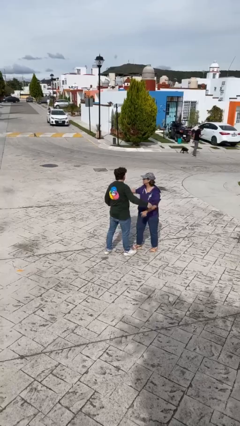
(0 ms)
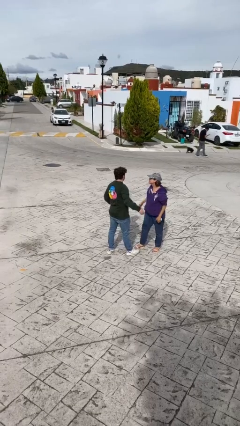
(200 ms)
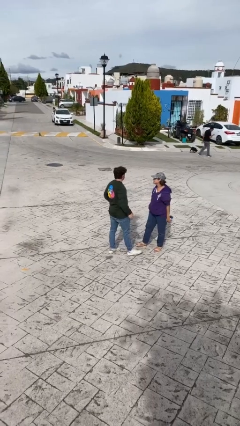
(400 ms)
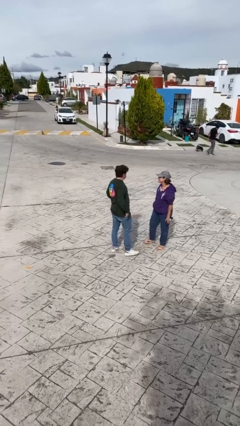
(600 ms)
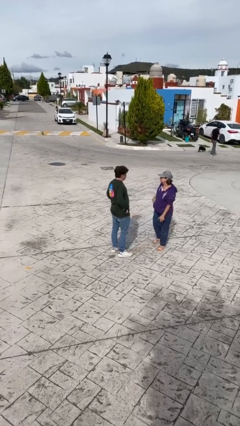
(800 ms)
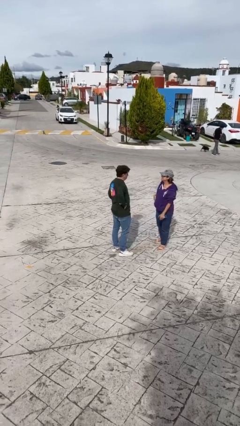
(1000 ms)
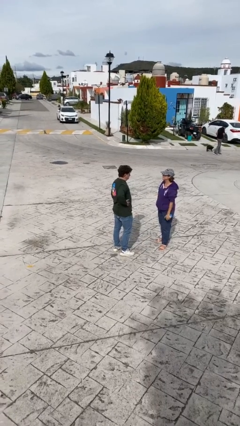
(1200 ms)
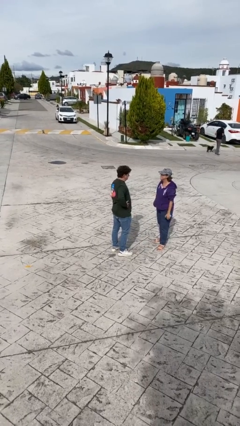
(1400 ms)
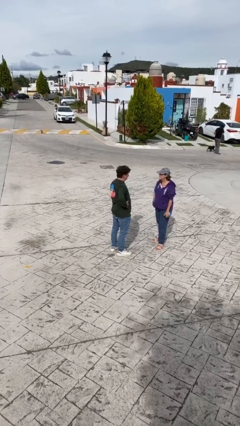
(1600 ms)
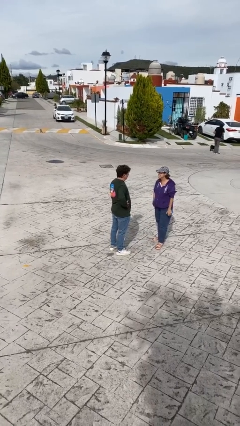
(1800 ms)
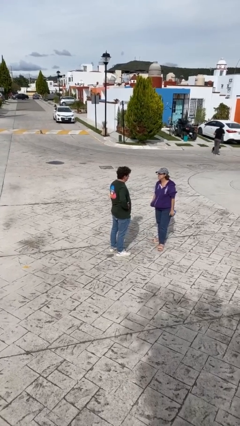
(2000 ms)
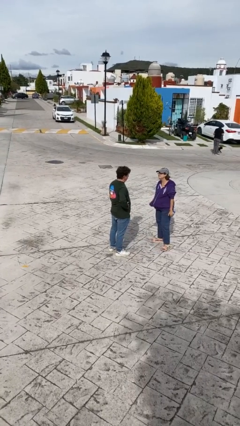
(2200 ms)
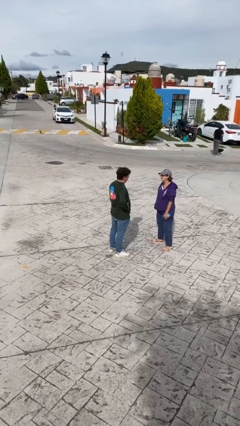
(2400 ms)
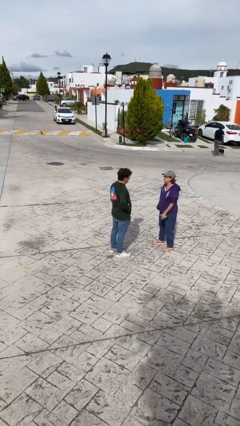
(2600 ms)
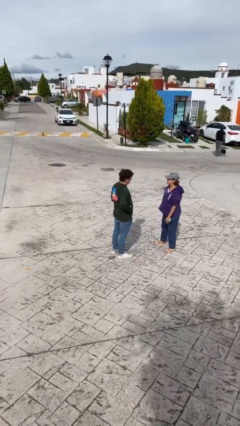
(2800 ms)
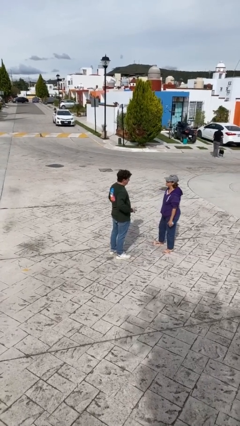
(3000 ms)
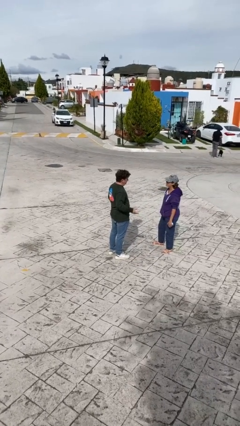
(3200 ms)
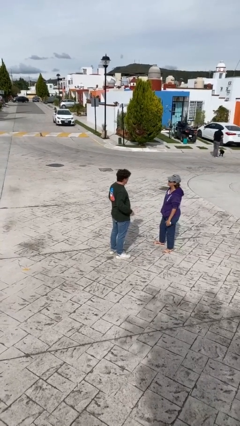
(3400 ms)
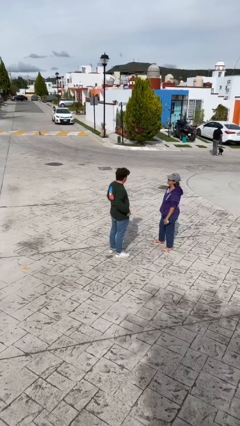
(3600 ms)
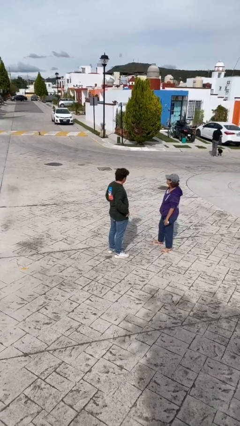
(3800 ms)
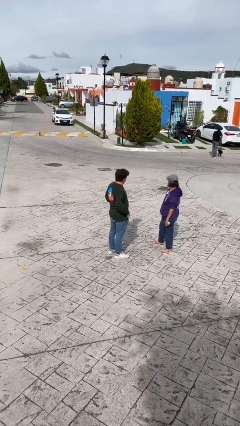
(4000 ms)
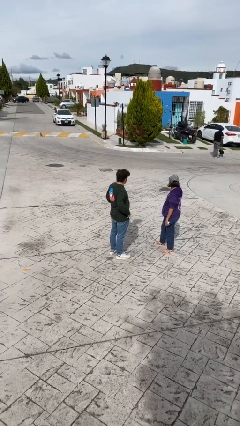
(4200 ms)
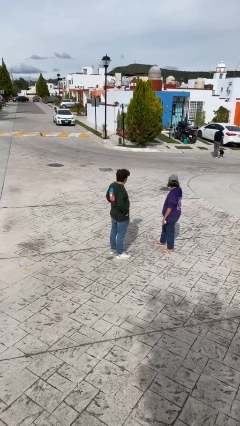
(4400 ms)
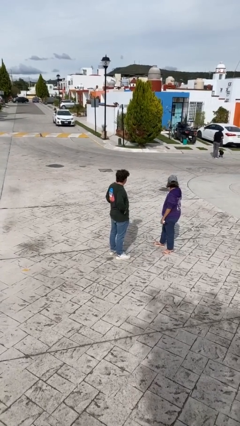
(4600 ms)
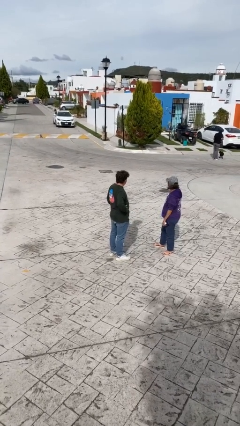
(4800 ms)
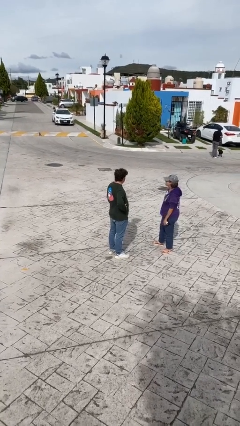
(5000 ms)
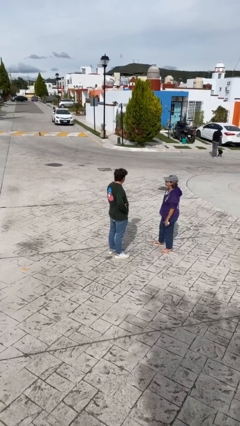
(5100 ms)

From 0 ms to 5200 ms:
person talks to person

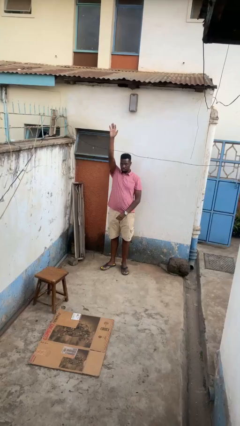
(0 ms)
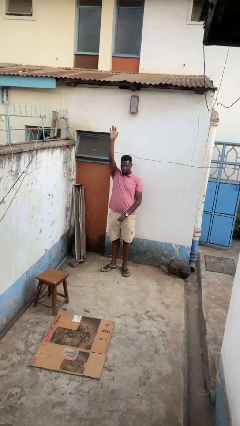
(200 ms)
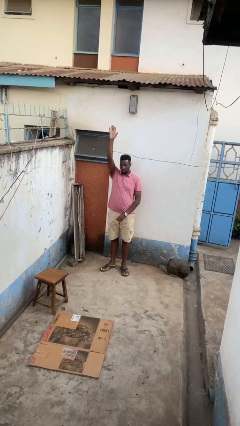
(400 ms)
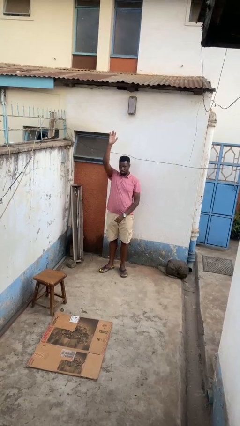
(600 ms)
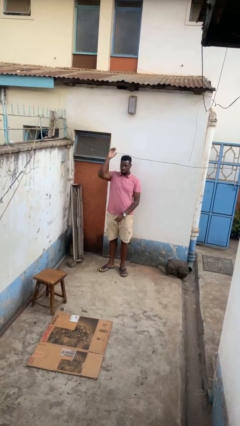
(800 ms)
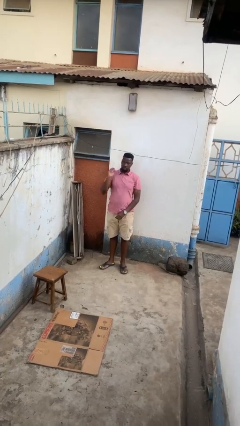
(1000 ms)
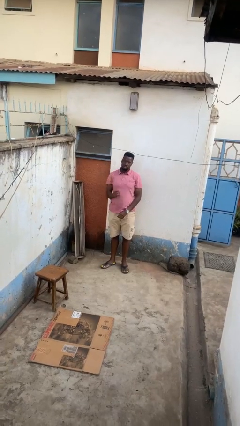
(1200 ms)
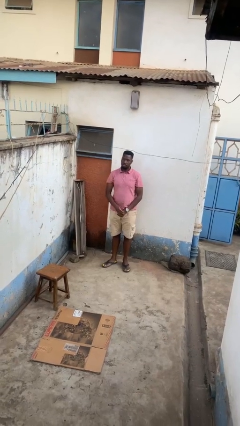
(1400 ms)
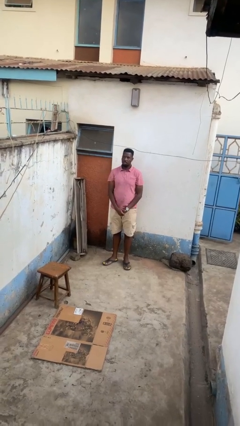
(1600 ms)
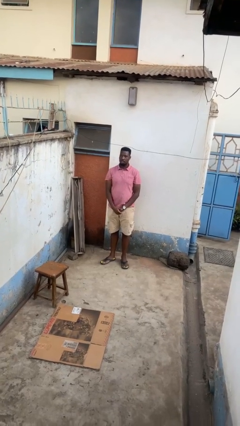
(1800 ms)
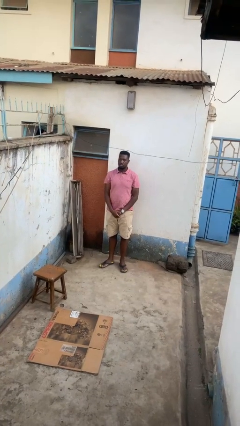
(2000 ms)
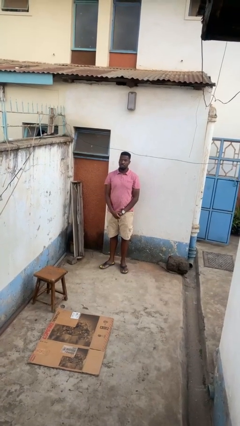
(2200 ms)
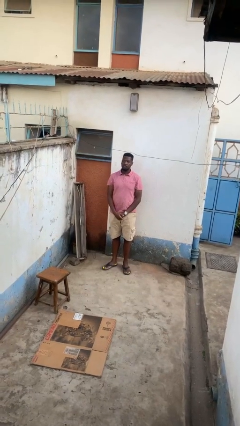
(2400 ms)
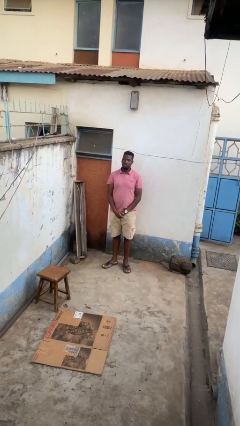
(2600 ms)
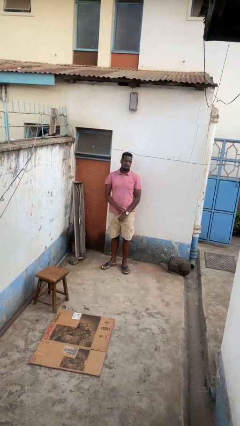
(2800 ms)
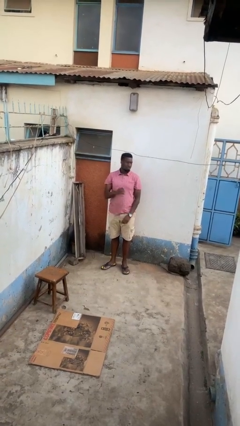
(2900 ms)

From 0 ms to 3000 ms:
person gestures lower hand

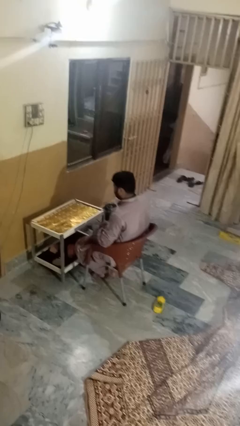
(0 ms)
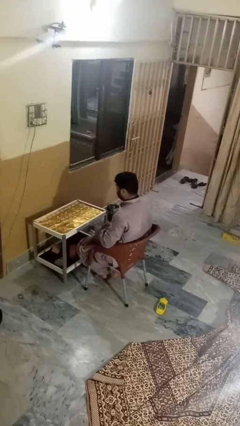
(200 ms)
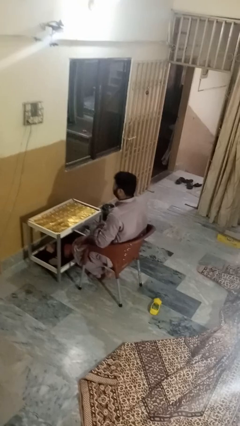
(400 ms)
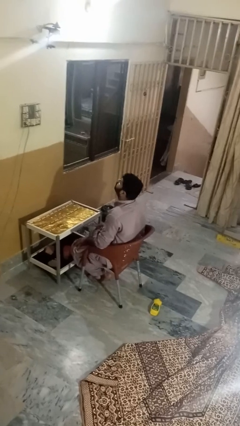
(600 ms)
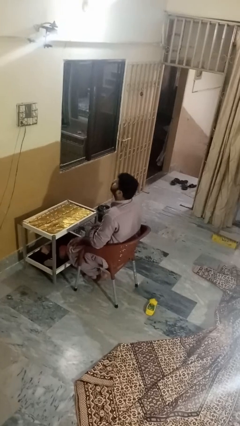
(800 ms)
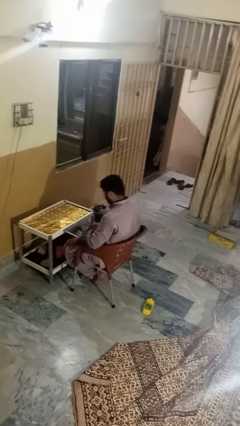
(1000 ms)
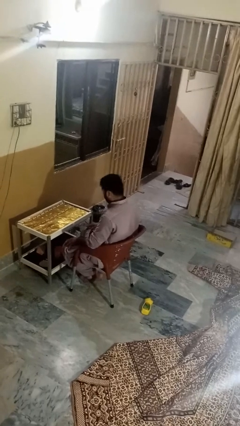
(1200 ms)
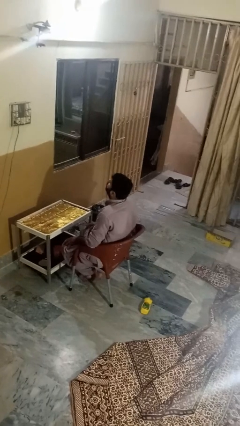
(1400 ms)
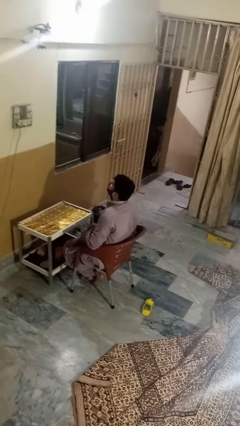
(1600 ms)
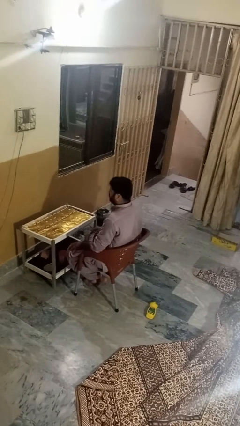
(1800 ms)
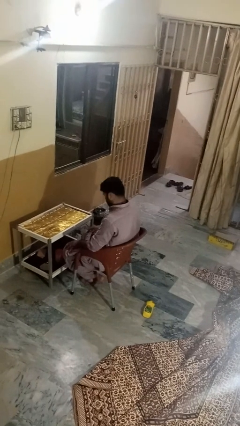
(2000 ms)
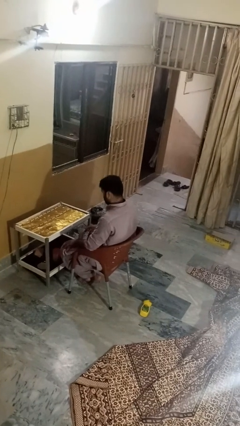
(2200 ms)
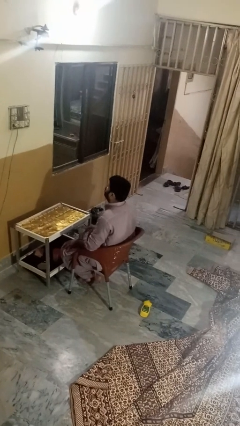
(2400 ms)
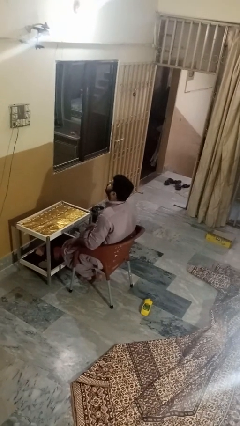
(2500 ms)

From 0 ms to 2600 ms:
person nods head

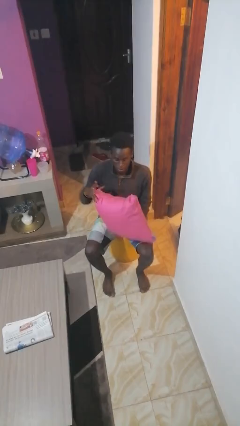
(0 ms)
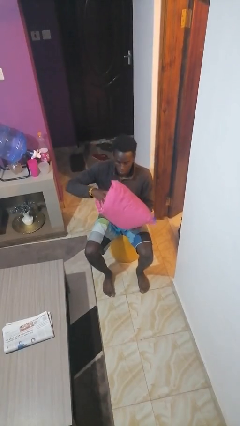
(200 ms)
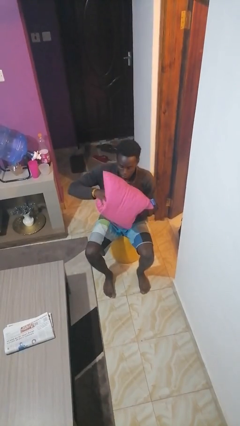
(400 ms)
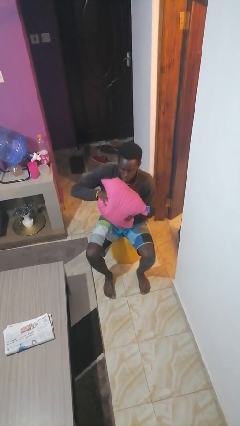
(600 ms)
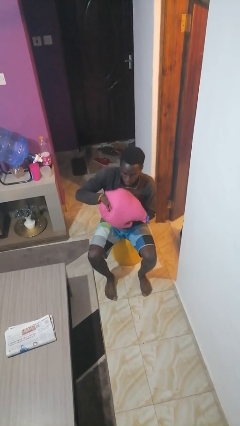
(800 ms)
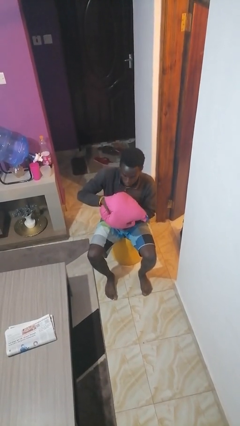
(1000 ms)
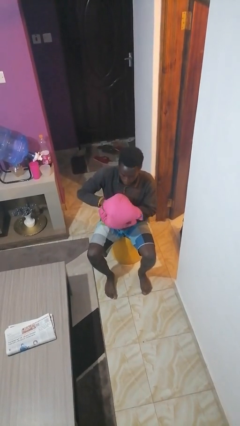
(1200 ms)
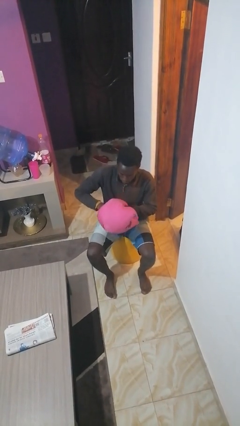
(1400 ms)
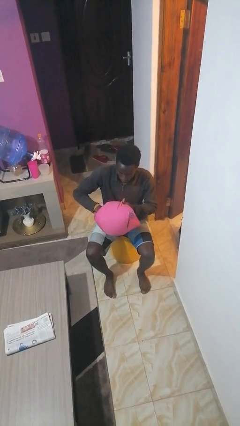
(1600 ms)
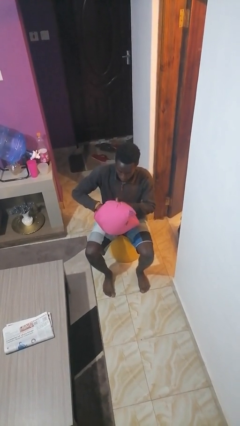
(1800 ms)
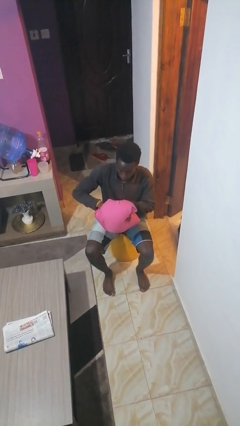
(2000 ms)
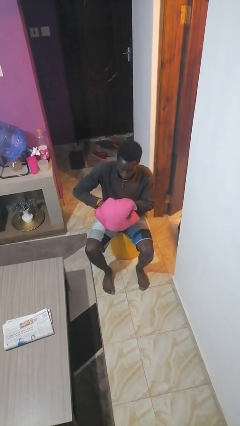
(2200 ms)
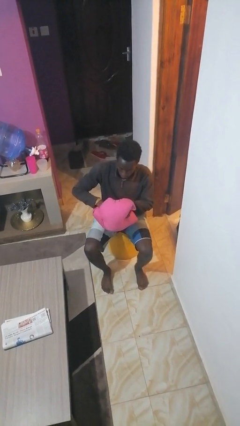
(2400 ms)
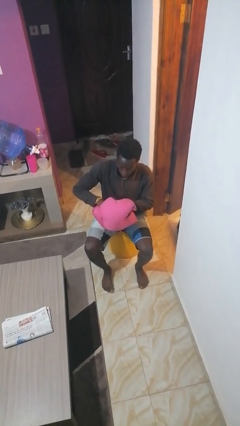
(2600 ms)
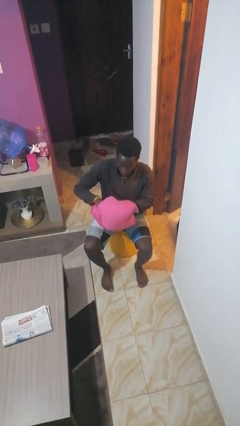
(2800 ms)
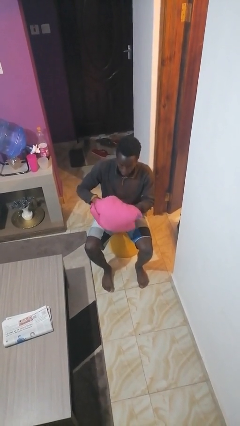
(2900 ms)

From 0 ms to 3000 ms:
person squeezes object

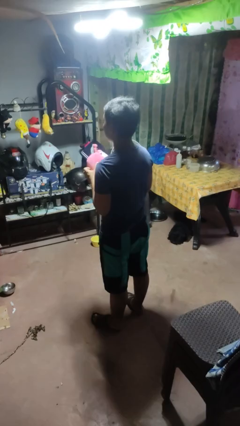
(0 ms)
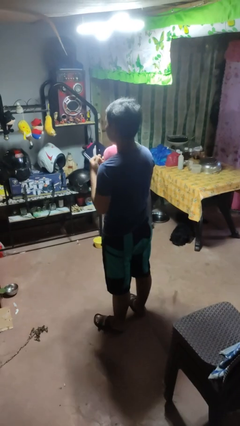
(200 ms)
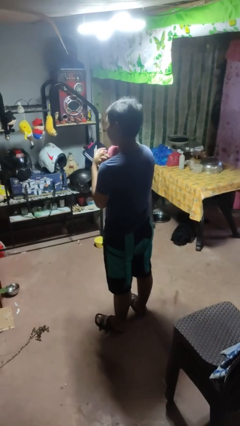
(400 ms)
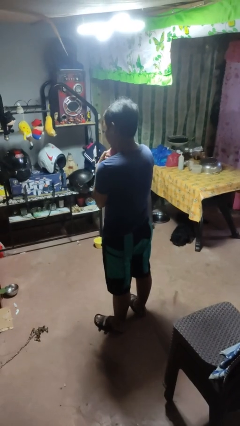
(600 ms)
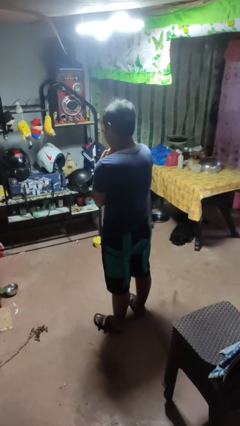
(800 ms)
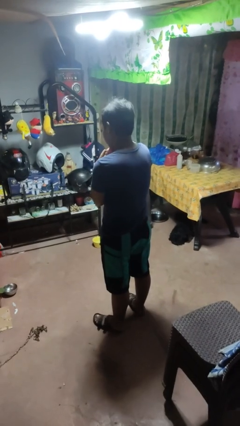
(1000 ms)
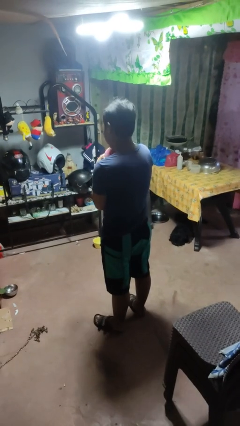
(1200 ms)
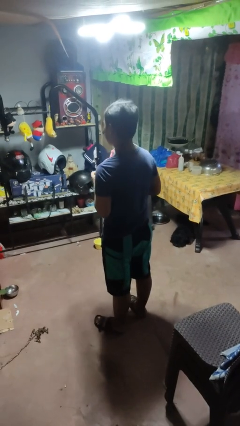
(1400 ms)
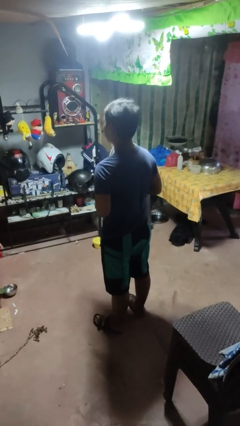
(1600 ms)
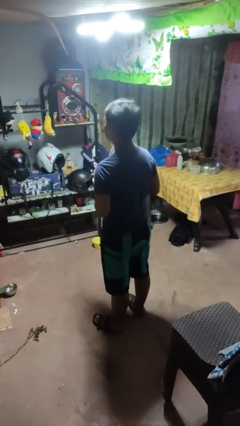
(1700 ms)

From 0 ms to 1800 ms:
person hugs stuffed animal

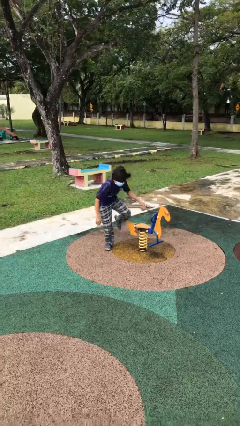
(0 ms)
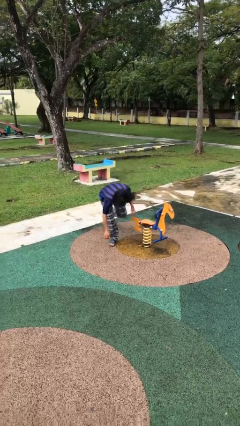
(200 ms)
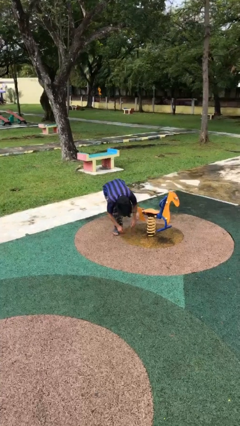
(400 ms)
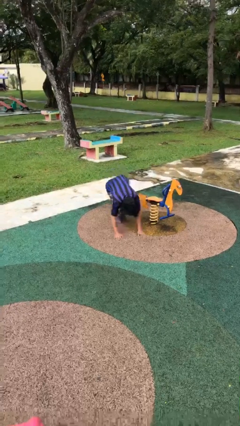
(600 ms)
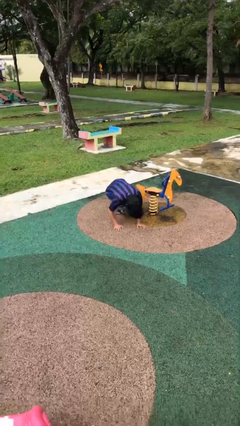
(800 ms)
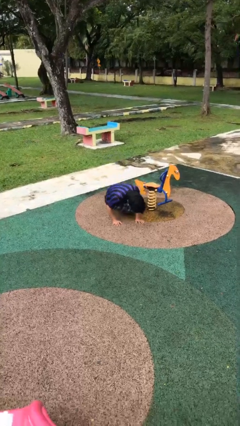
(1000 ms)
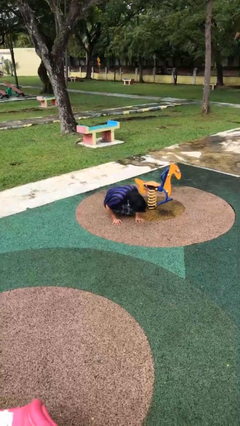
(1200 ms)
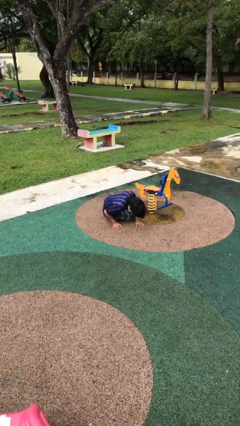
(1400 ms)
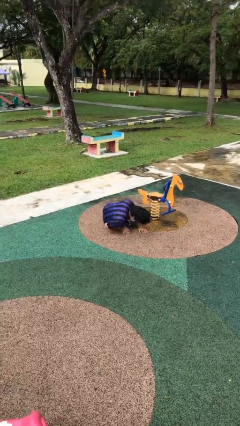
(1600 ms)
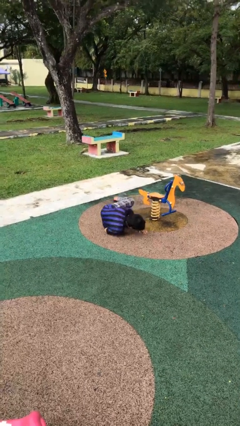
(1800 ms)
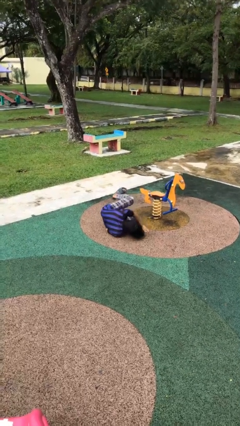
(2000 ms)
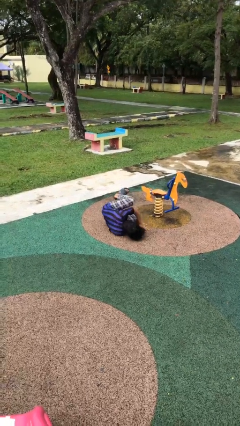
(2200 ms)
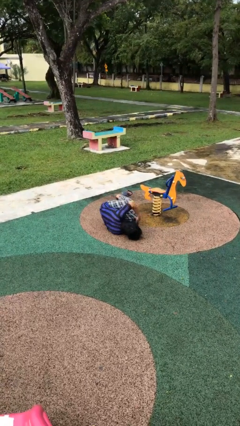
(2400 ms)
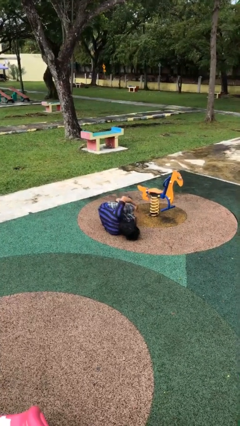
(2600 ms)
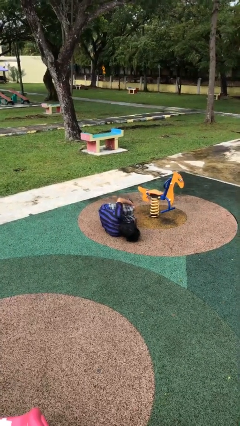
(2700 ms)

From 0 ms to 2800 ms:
person lies down on floor
